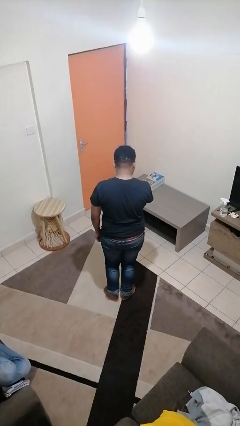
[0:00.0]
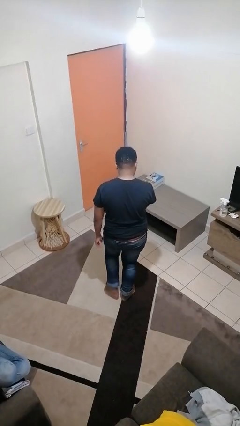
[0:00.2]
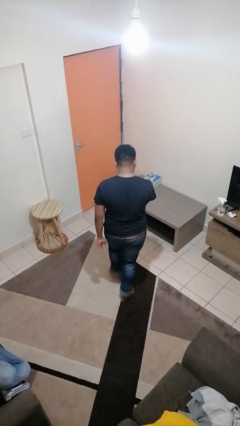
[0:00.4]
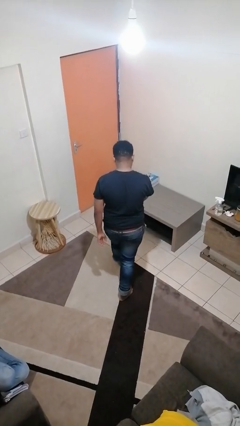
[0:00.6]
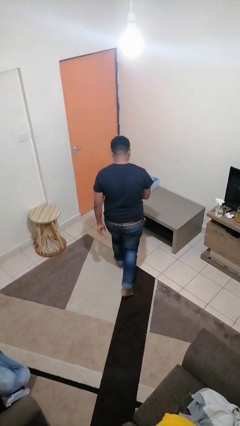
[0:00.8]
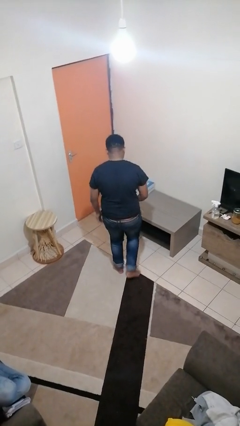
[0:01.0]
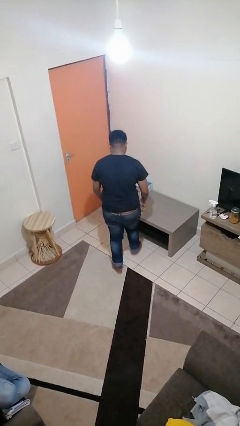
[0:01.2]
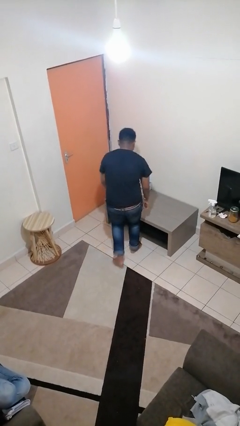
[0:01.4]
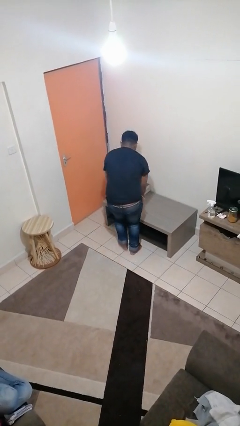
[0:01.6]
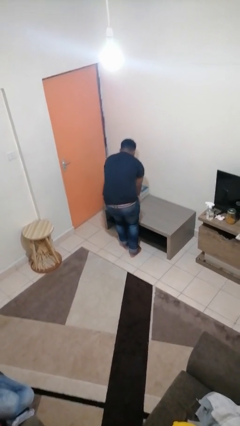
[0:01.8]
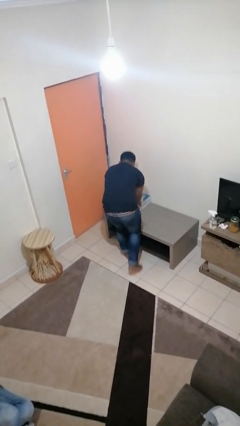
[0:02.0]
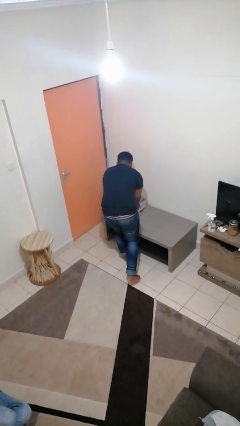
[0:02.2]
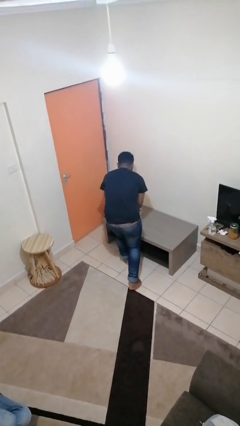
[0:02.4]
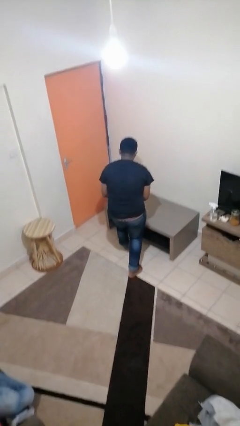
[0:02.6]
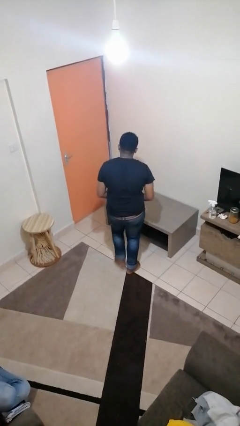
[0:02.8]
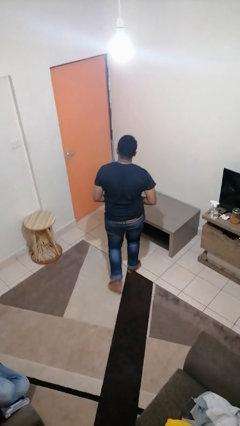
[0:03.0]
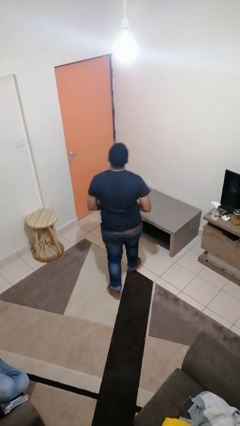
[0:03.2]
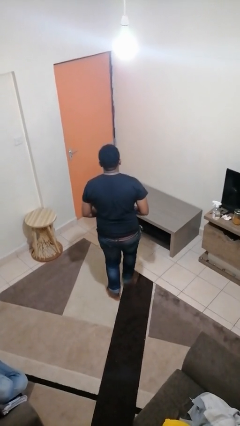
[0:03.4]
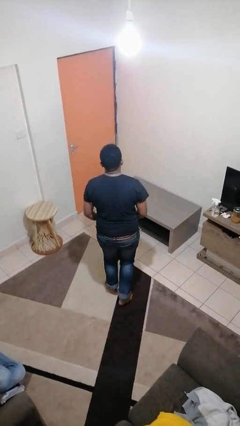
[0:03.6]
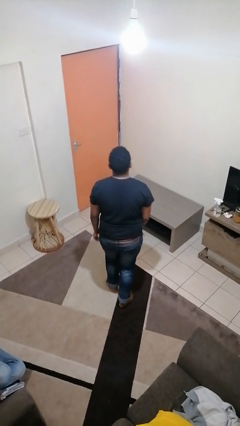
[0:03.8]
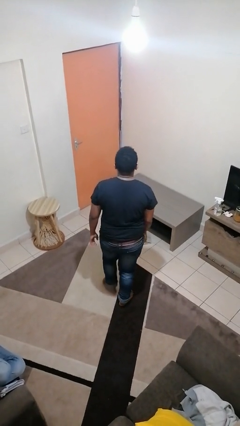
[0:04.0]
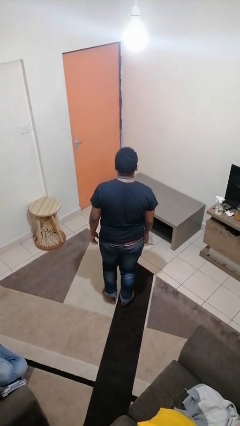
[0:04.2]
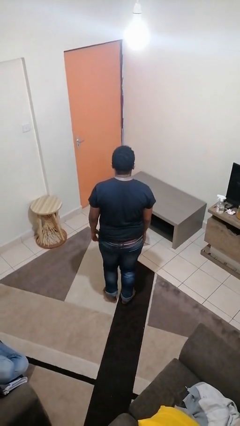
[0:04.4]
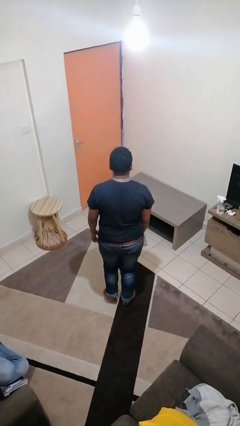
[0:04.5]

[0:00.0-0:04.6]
person picks up object from table

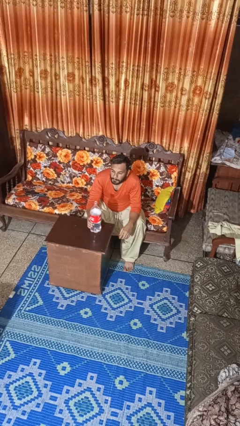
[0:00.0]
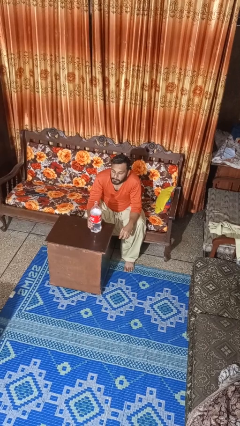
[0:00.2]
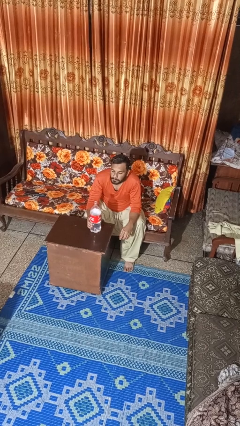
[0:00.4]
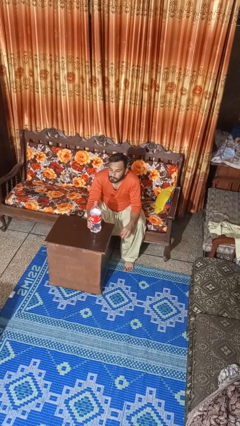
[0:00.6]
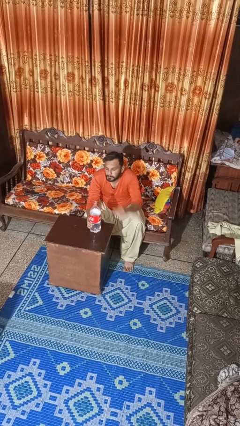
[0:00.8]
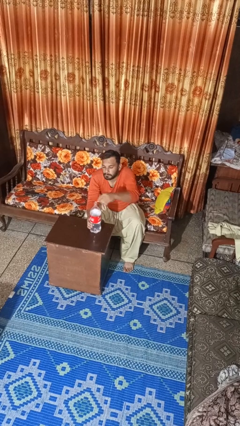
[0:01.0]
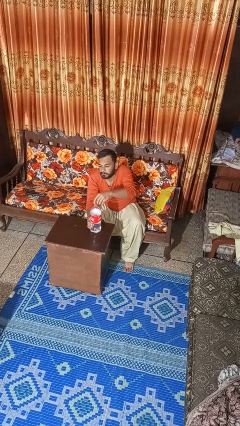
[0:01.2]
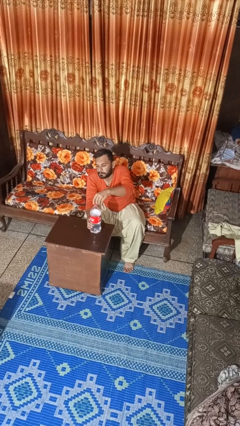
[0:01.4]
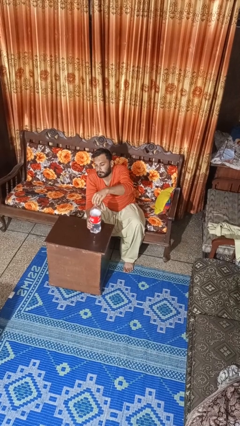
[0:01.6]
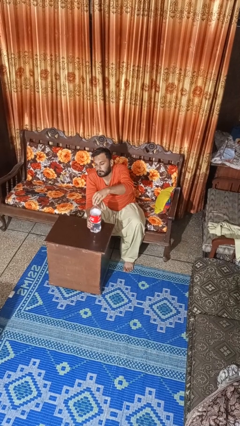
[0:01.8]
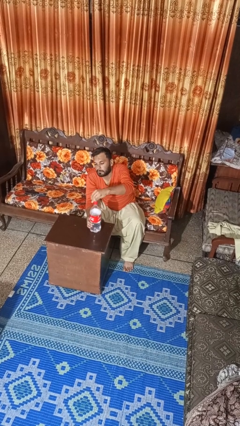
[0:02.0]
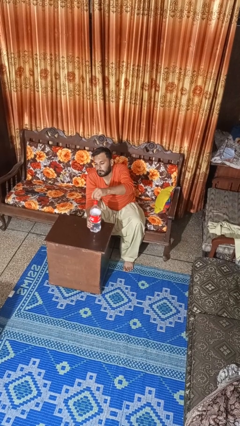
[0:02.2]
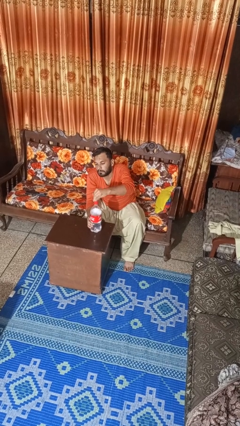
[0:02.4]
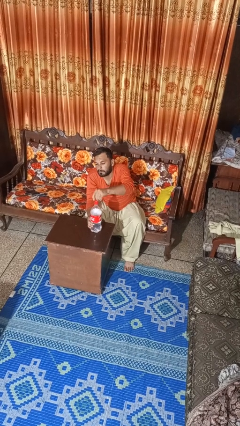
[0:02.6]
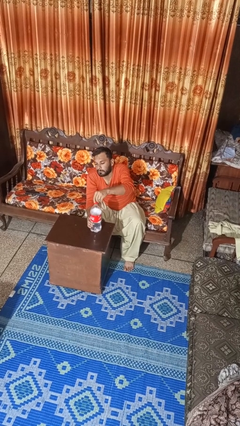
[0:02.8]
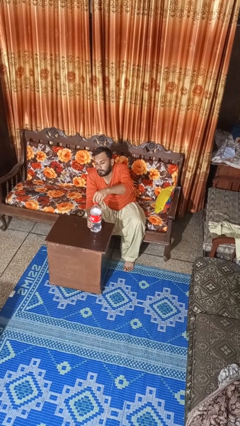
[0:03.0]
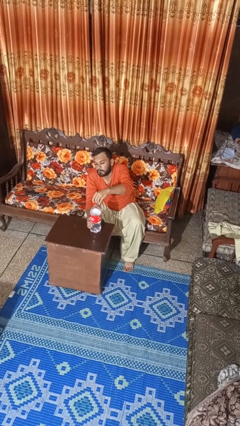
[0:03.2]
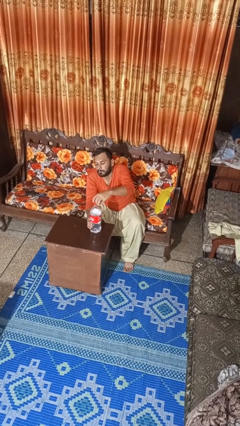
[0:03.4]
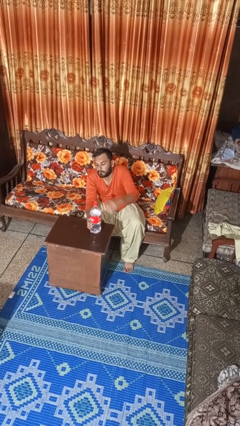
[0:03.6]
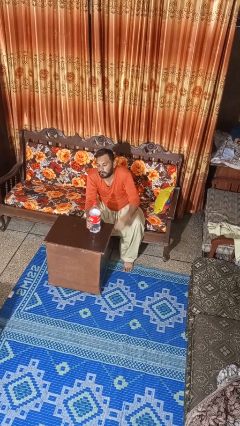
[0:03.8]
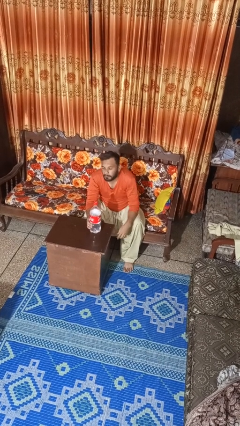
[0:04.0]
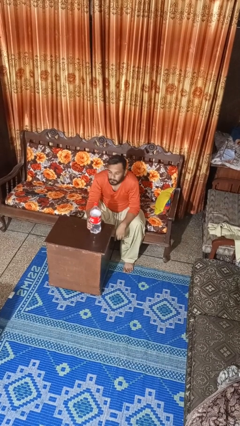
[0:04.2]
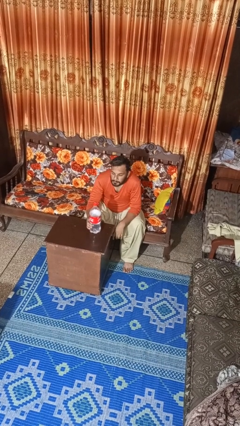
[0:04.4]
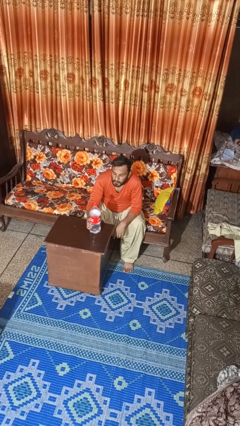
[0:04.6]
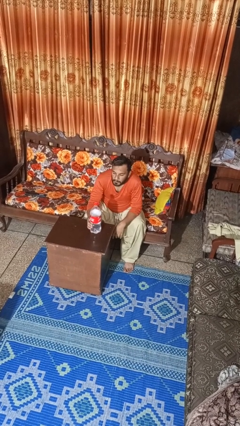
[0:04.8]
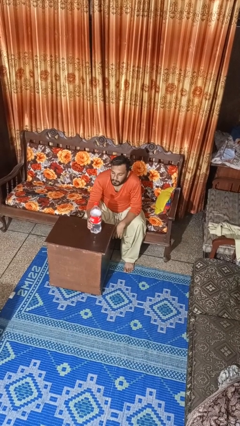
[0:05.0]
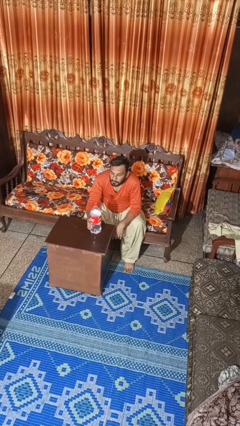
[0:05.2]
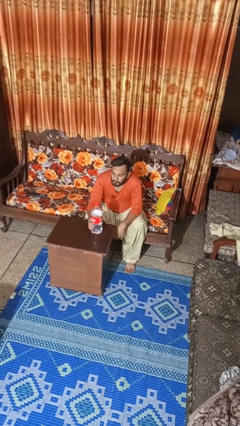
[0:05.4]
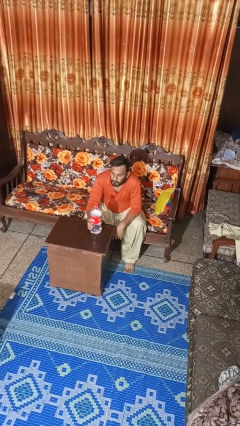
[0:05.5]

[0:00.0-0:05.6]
person screws lid to bottle

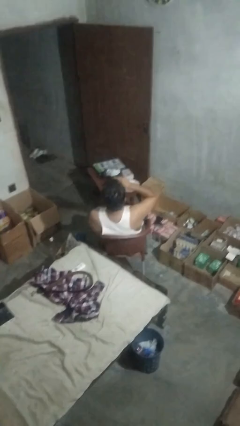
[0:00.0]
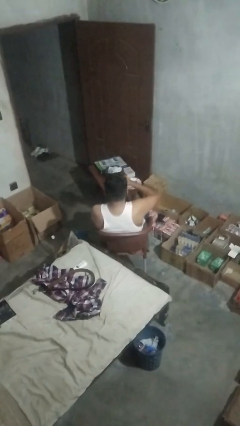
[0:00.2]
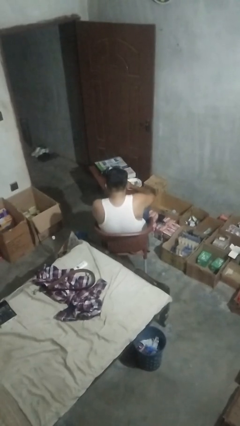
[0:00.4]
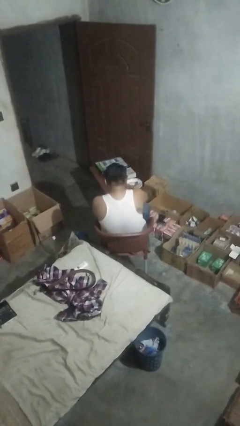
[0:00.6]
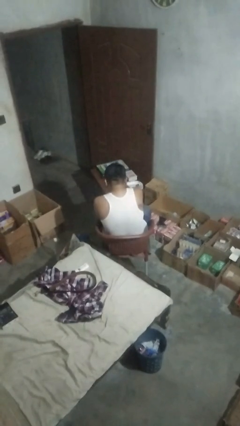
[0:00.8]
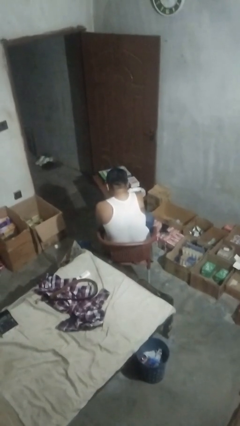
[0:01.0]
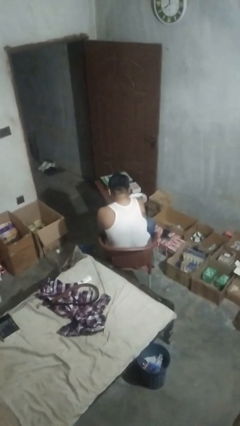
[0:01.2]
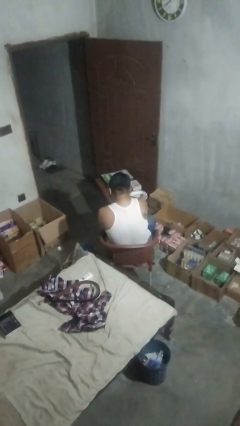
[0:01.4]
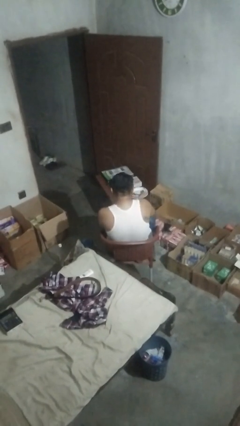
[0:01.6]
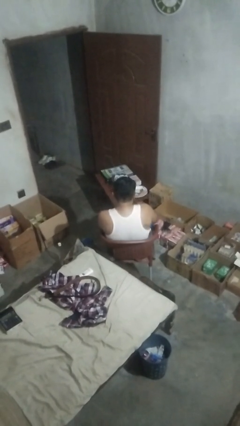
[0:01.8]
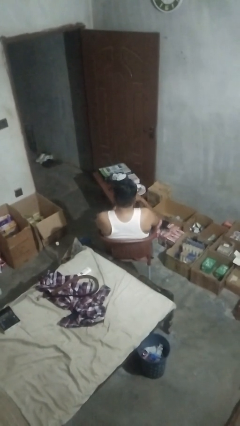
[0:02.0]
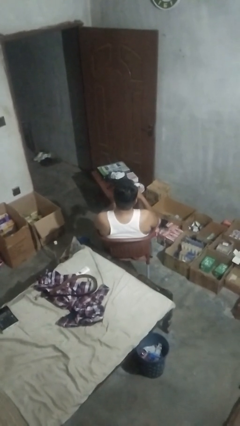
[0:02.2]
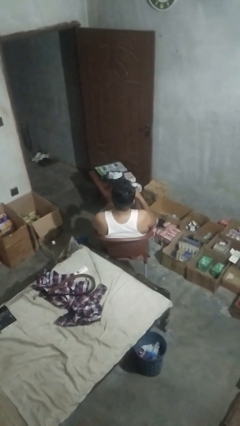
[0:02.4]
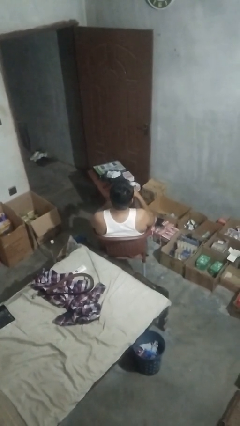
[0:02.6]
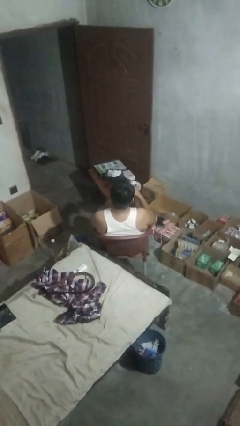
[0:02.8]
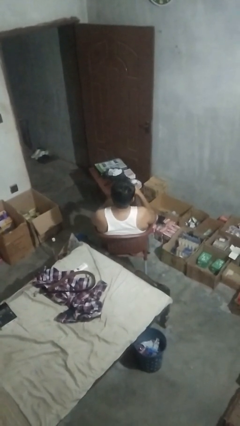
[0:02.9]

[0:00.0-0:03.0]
person drinks from cup

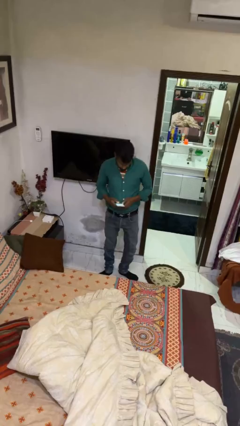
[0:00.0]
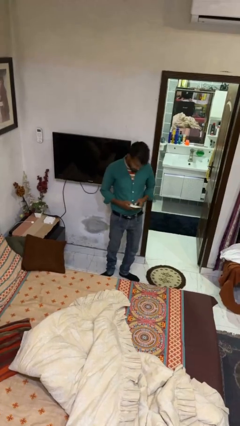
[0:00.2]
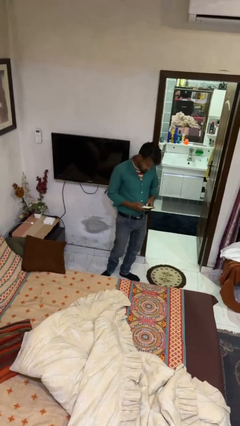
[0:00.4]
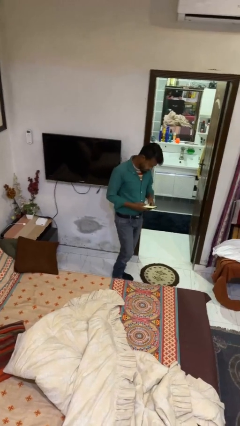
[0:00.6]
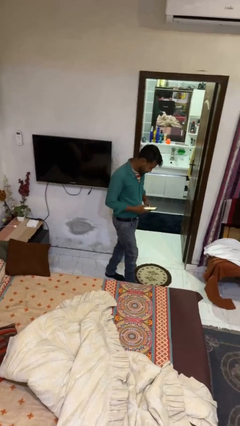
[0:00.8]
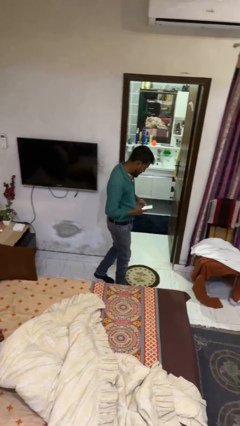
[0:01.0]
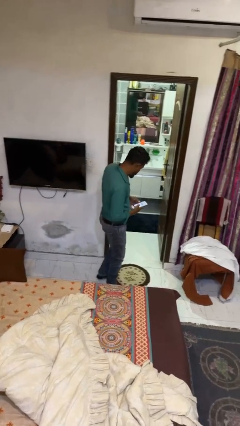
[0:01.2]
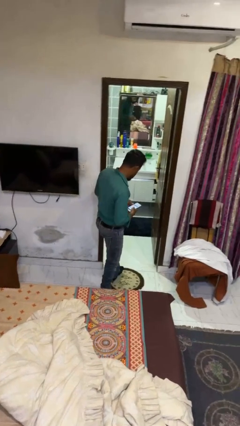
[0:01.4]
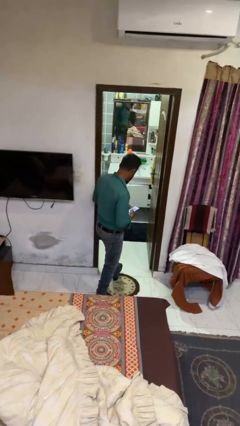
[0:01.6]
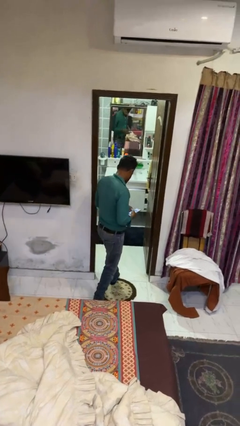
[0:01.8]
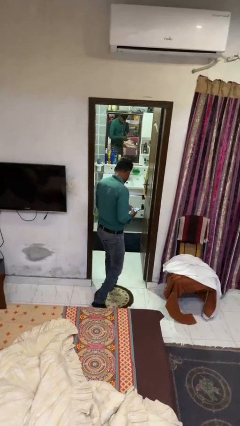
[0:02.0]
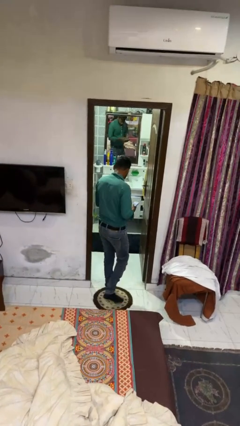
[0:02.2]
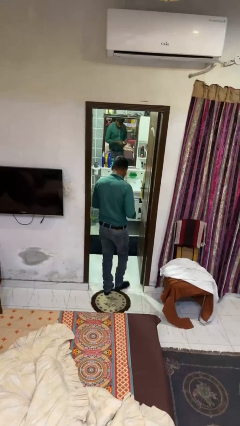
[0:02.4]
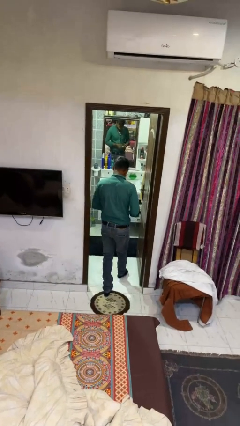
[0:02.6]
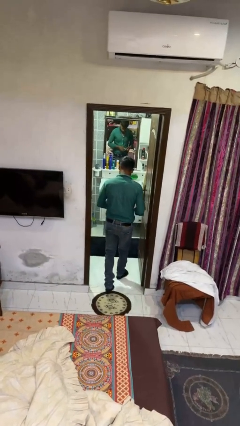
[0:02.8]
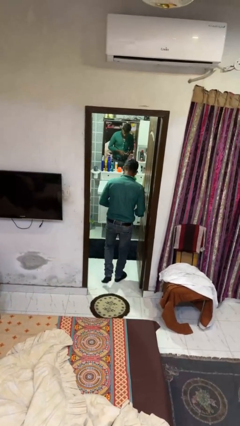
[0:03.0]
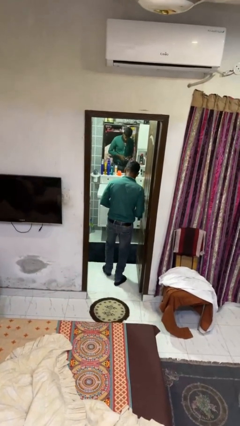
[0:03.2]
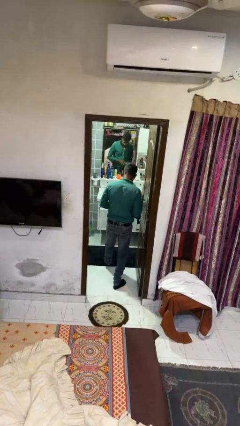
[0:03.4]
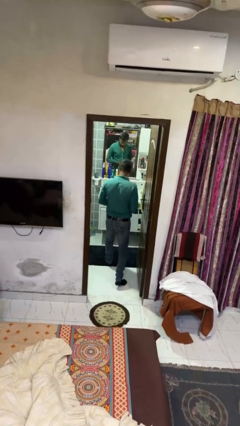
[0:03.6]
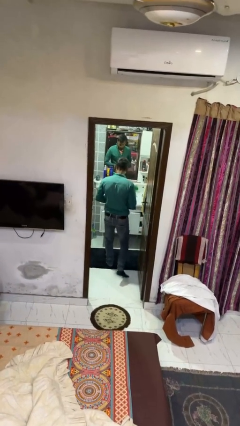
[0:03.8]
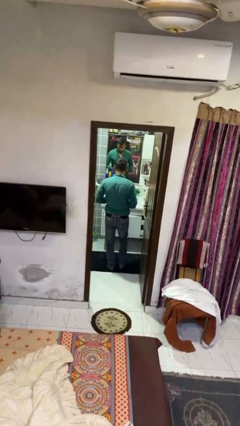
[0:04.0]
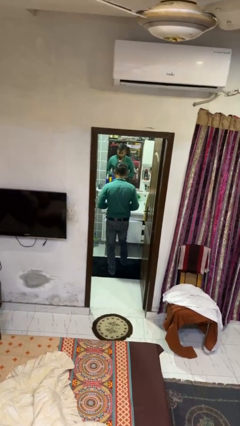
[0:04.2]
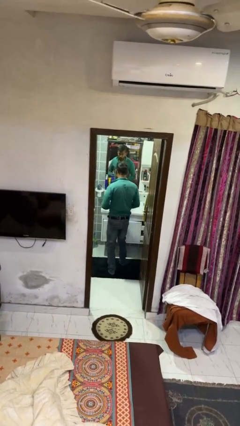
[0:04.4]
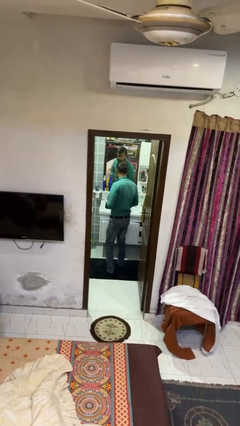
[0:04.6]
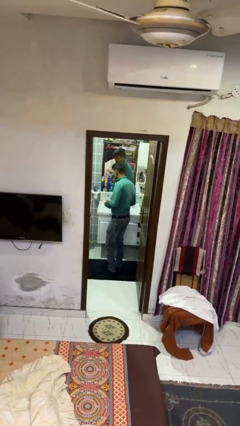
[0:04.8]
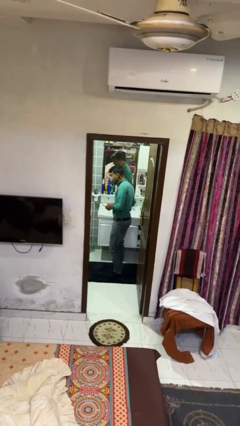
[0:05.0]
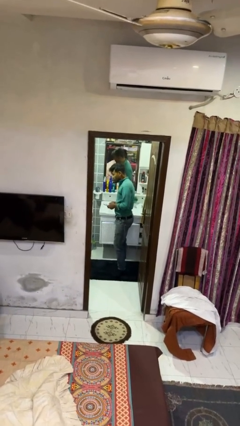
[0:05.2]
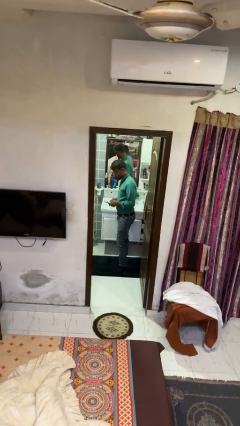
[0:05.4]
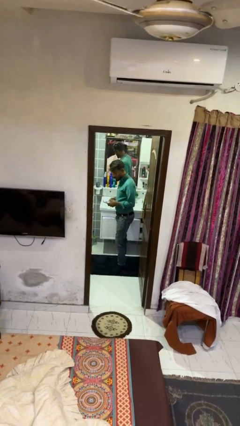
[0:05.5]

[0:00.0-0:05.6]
person exits scene through structure
